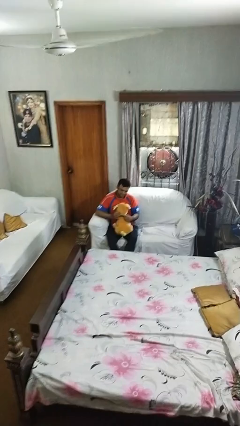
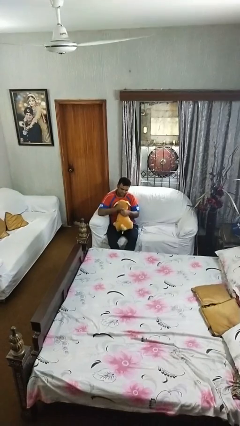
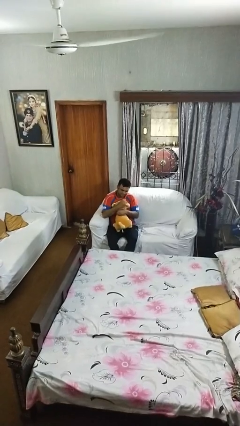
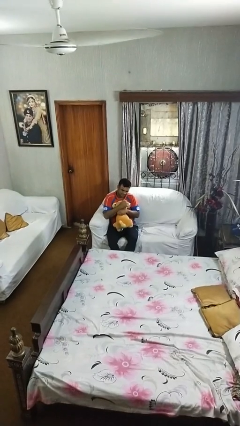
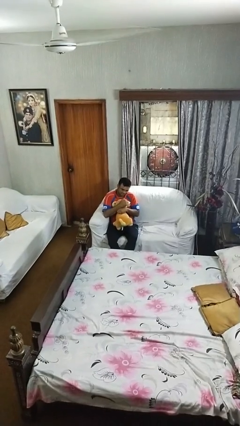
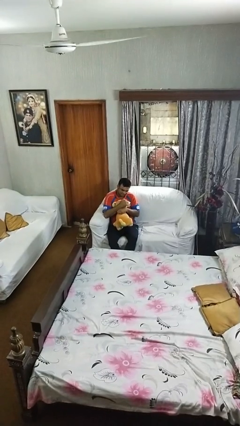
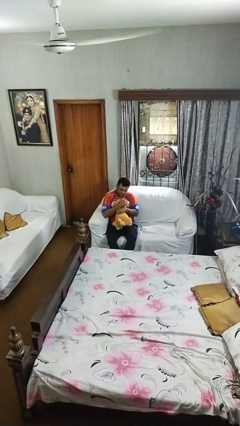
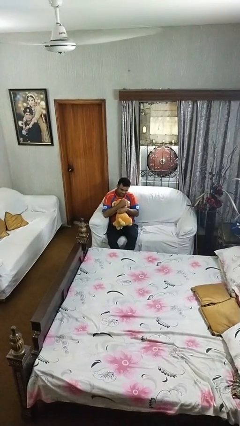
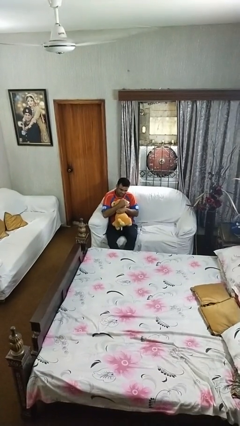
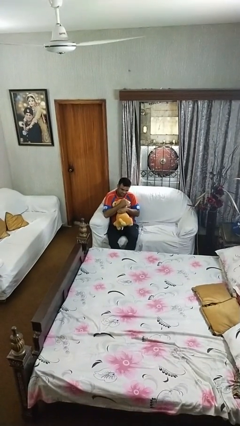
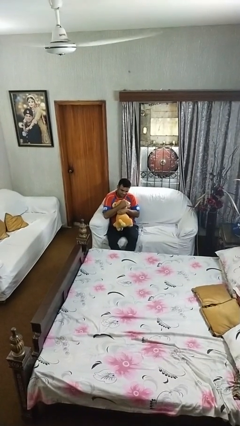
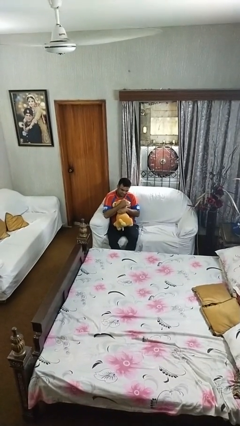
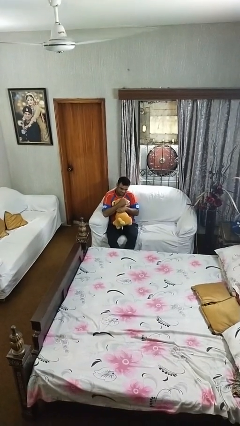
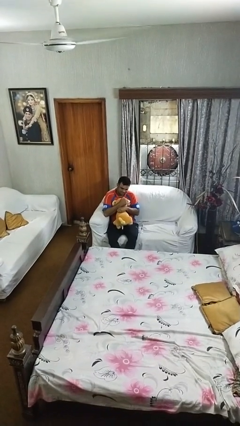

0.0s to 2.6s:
person hugs stuffed animal

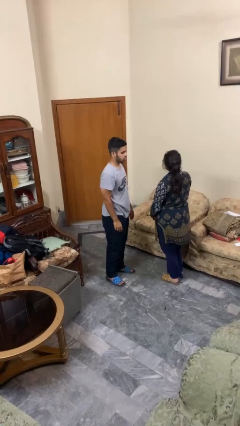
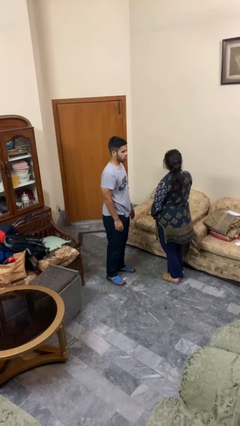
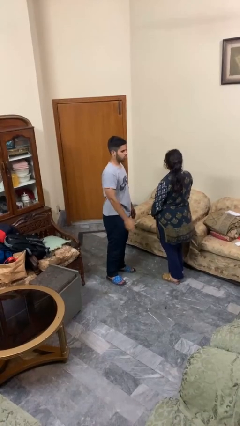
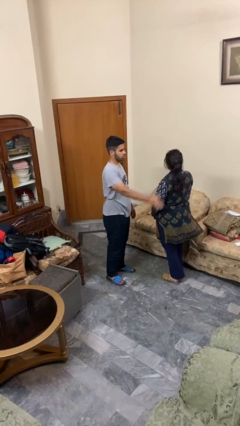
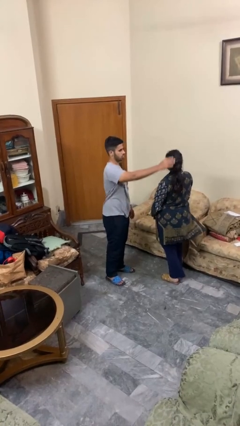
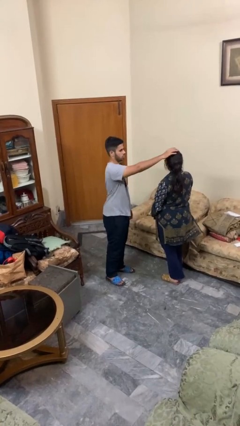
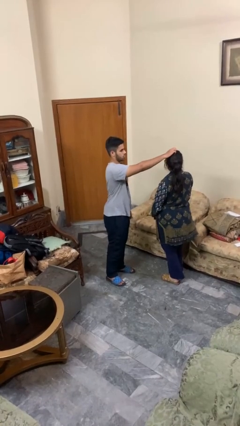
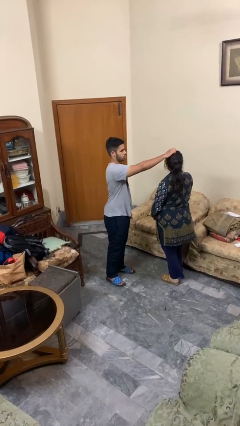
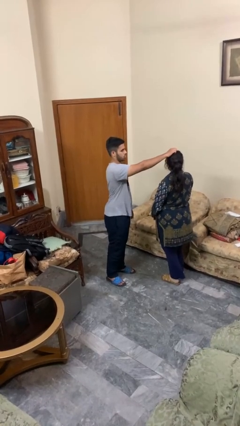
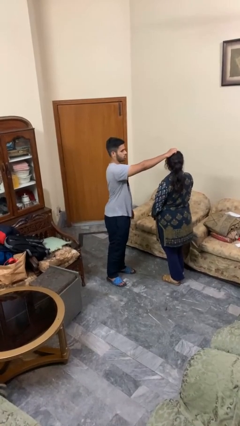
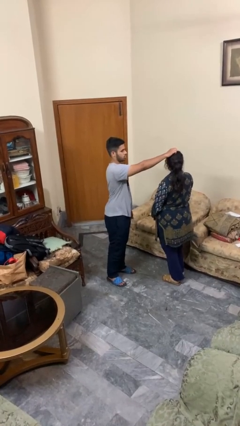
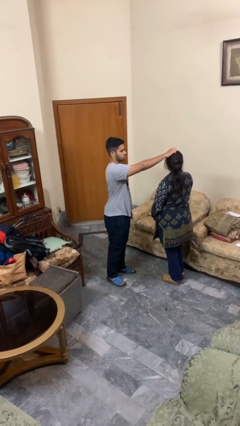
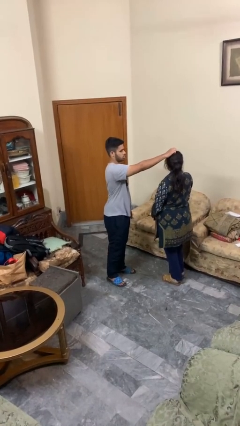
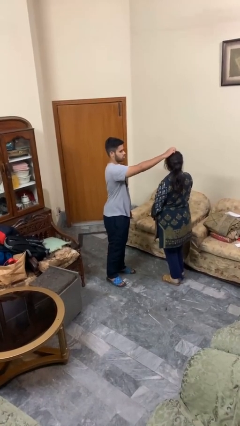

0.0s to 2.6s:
person grabs person by hair

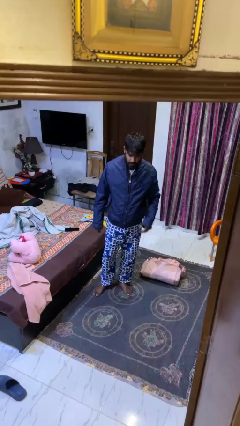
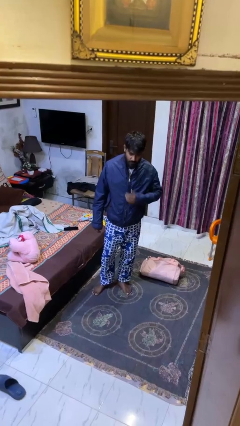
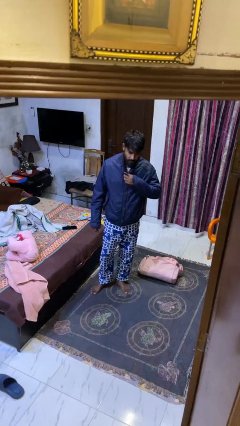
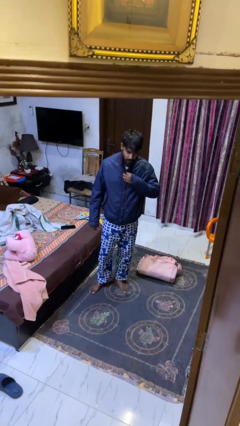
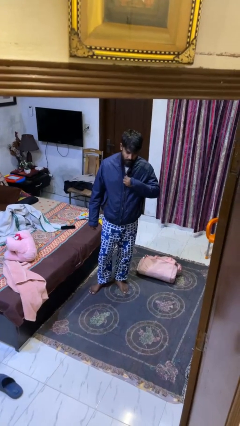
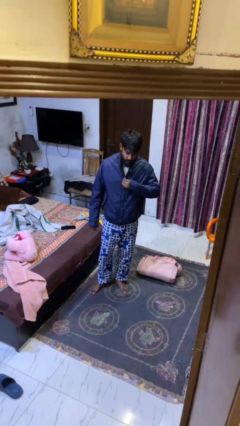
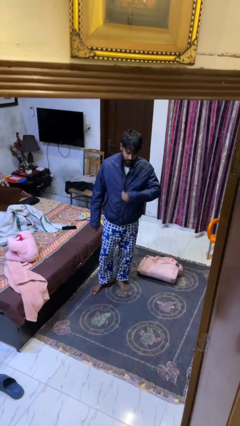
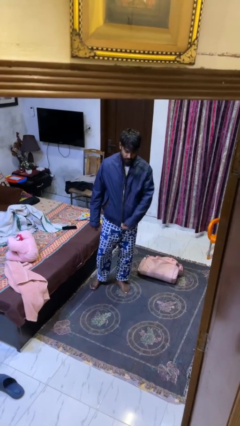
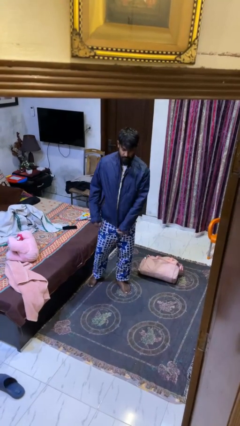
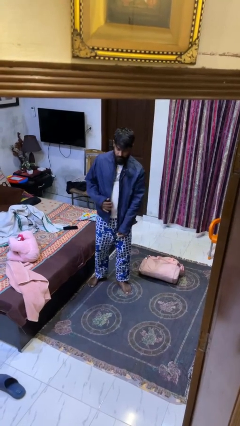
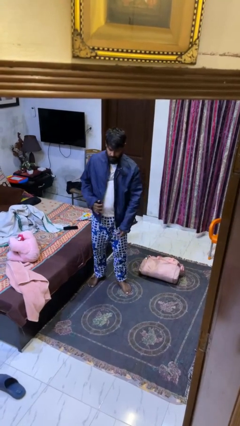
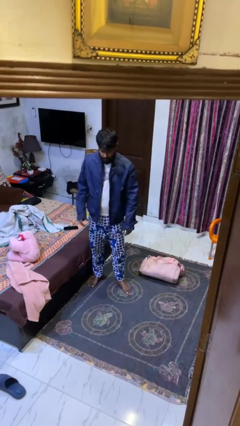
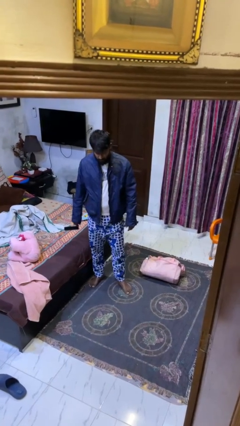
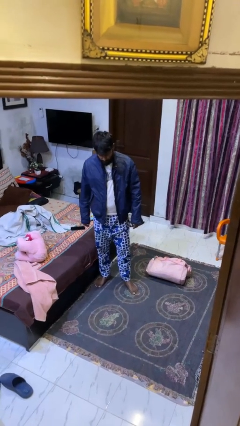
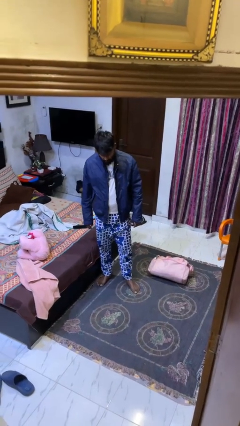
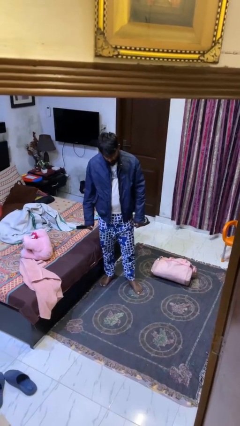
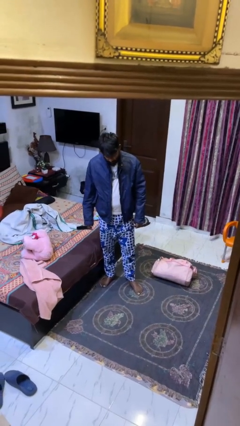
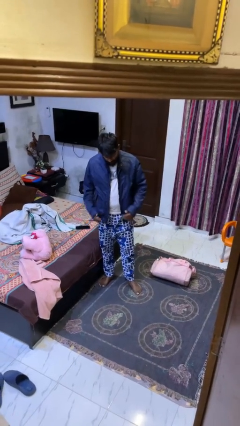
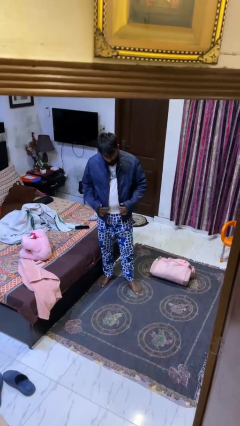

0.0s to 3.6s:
person unzips jacket

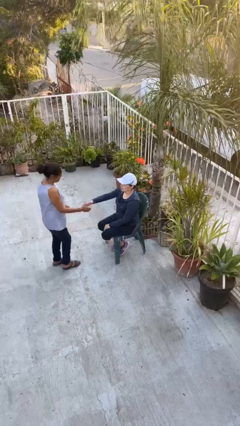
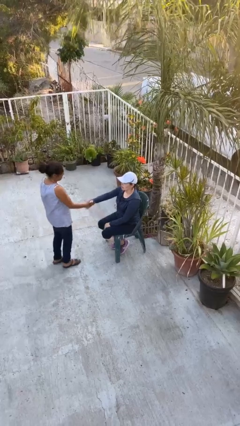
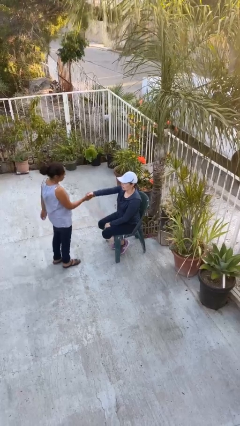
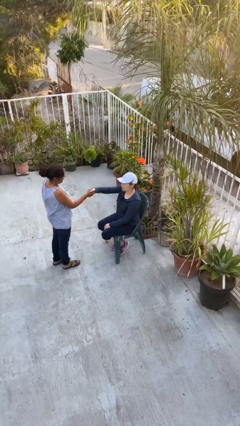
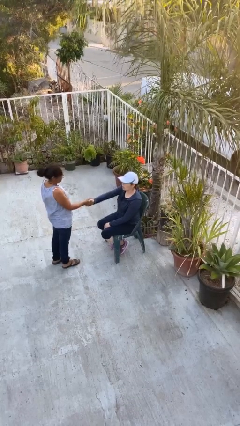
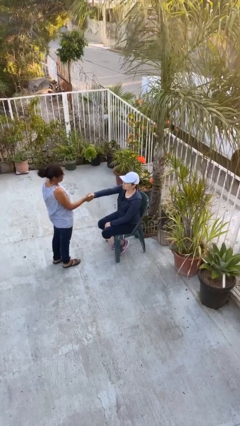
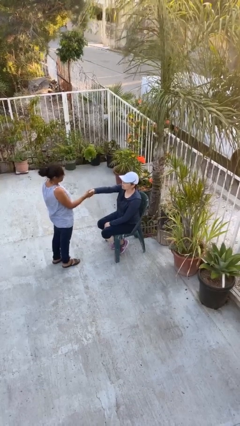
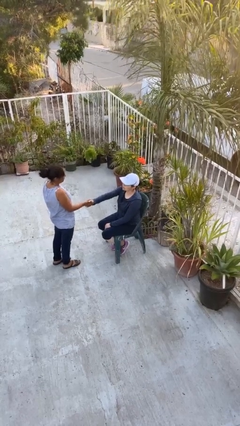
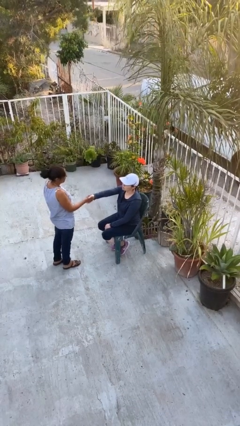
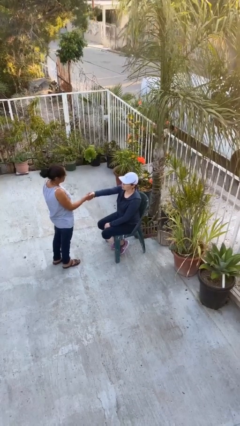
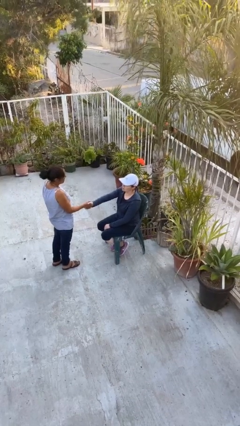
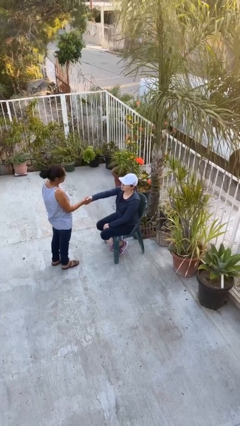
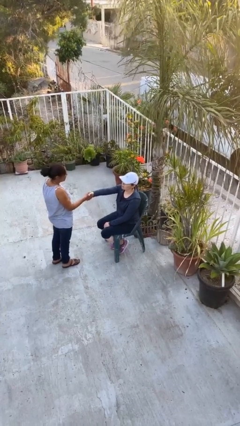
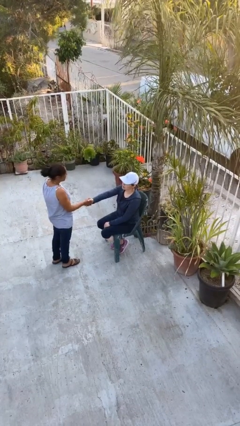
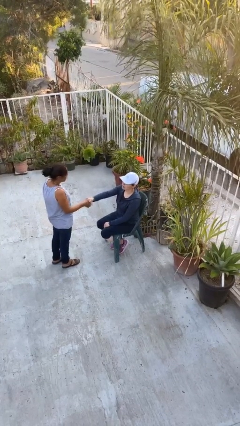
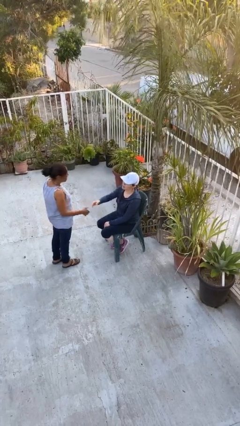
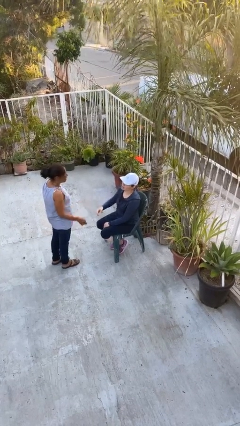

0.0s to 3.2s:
person shakes hand

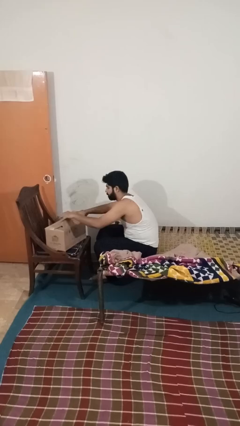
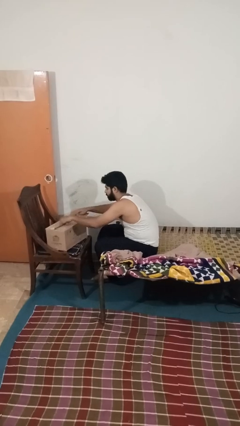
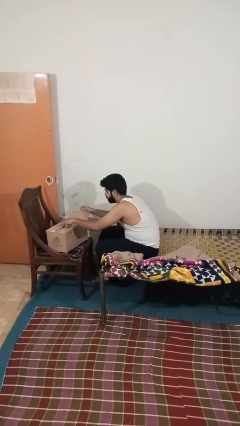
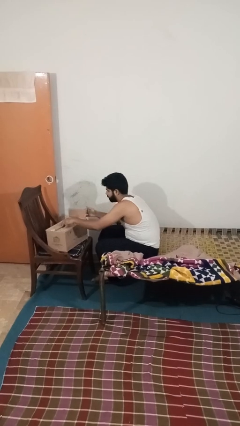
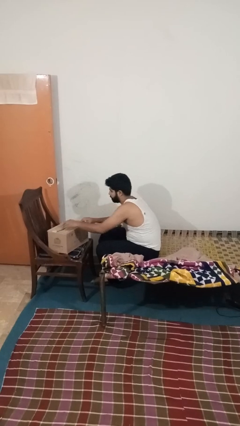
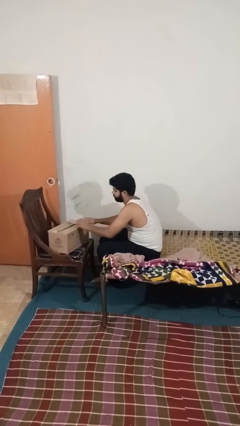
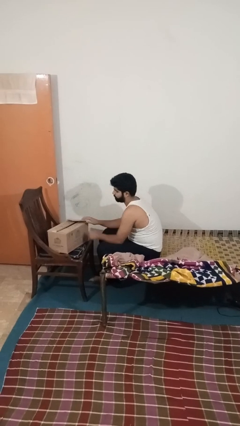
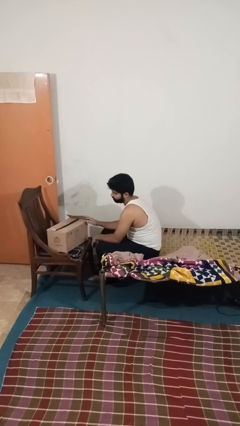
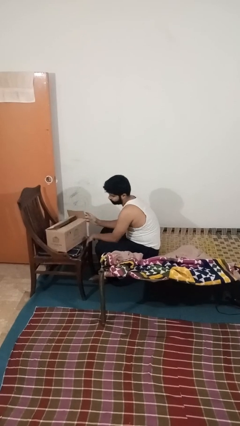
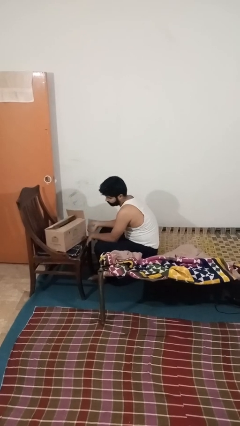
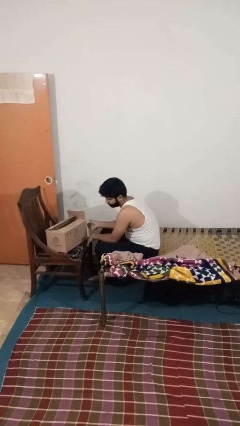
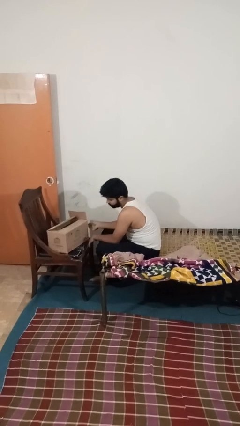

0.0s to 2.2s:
person closes box

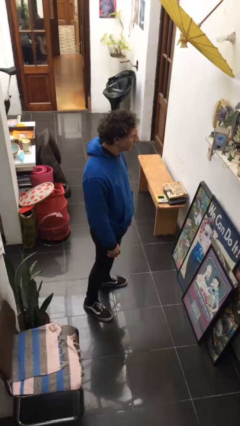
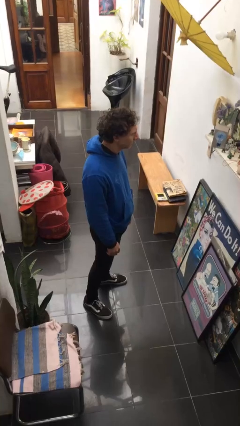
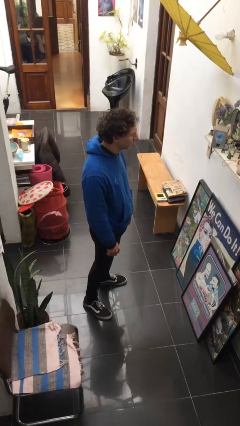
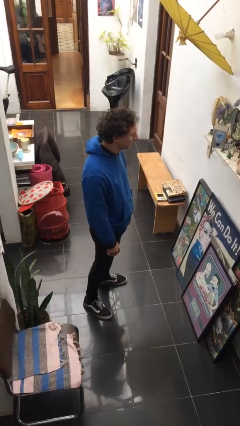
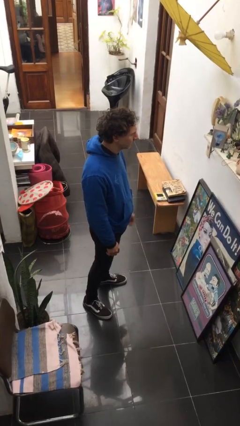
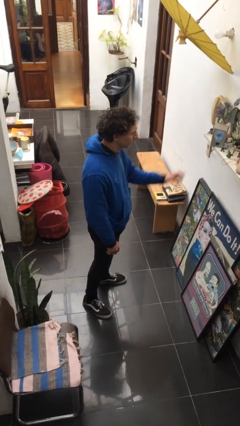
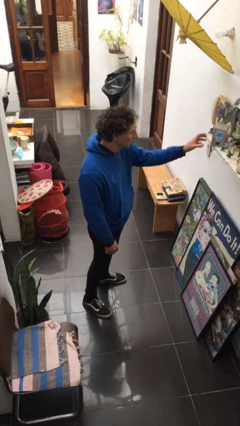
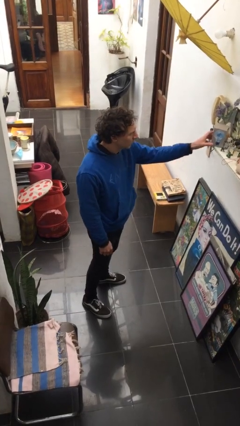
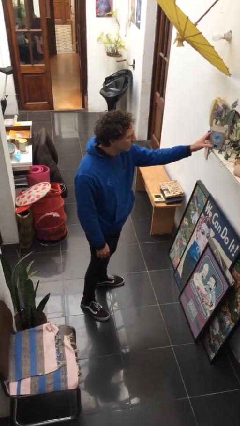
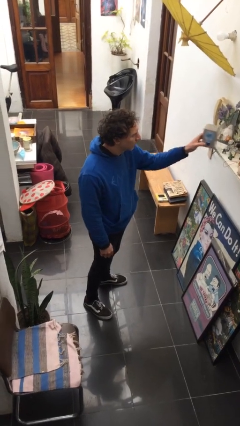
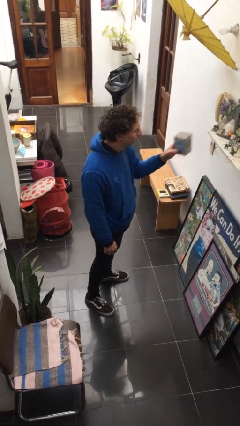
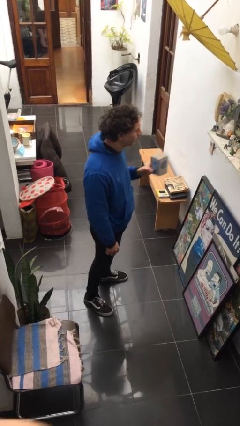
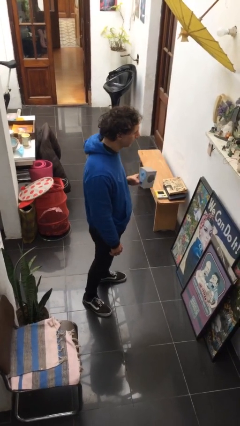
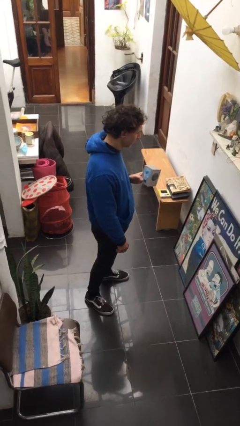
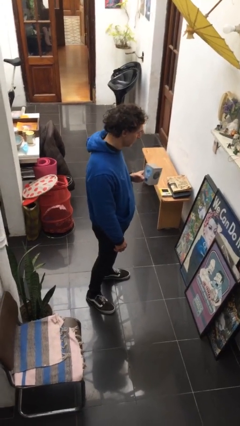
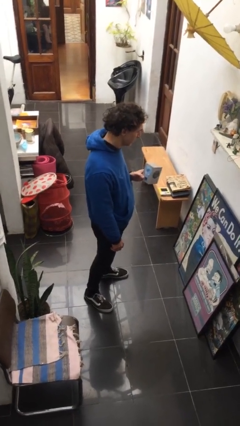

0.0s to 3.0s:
person picks up object from countertop

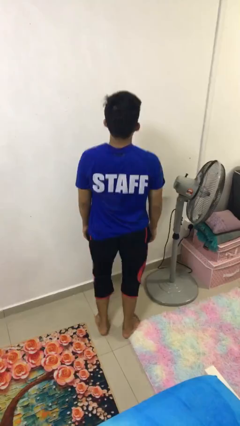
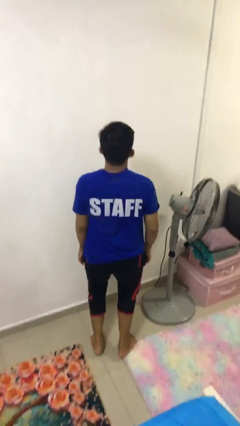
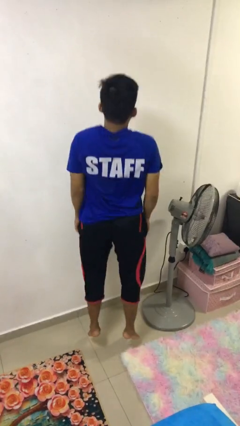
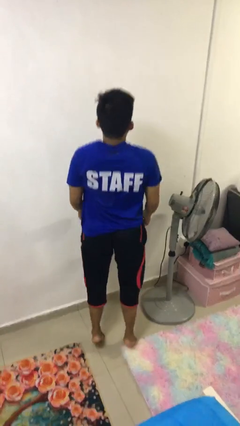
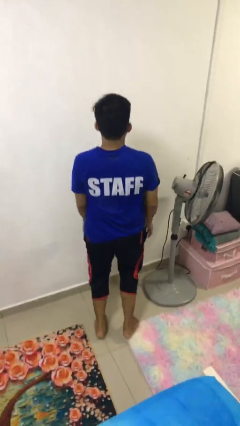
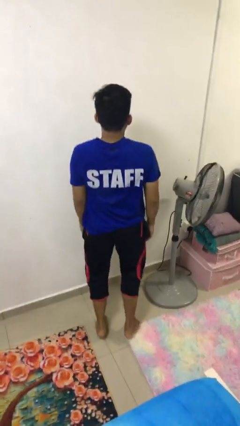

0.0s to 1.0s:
person jumps
